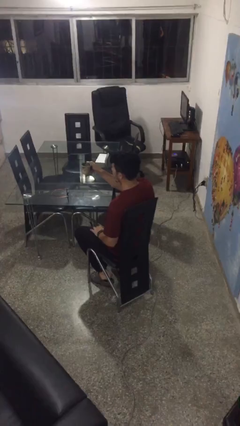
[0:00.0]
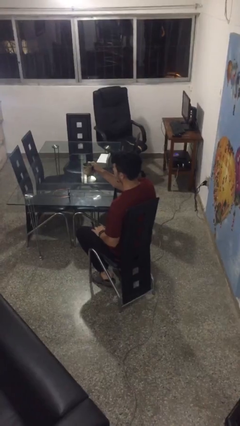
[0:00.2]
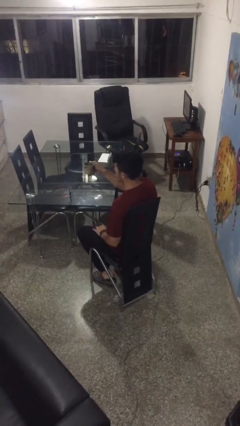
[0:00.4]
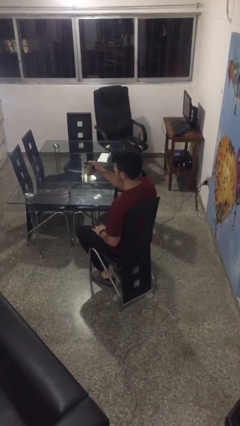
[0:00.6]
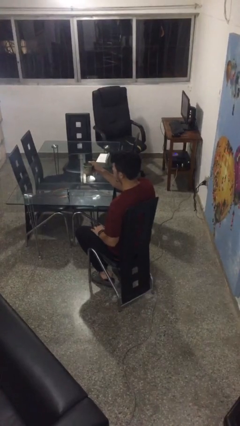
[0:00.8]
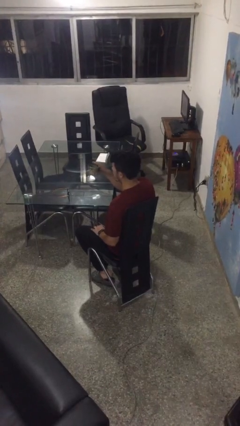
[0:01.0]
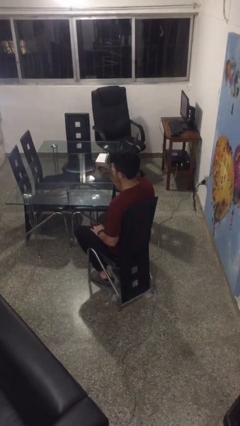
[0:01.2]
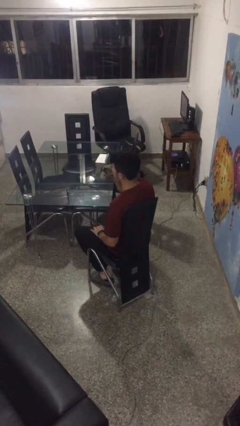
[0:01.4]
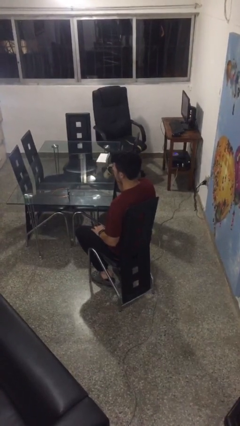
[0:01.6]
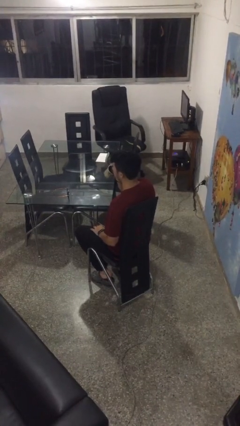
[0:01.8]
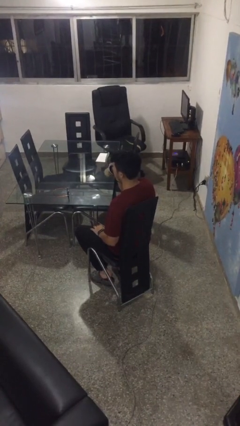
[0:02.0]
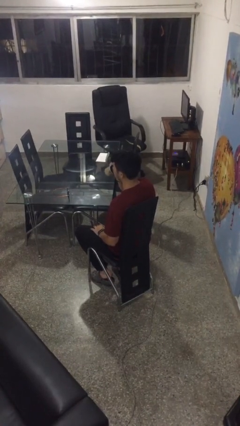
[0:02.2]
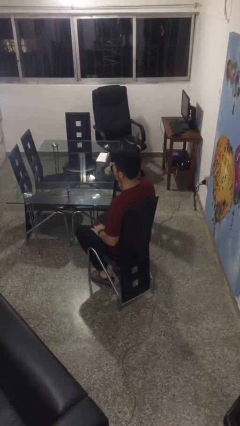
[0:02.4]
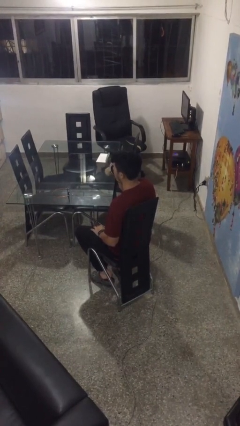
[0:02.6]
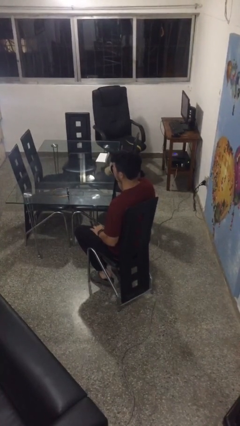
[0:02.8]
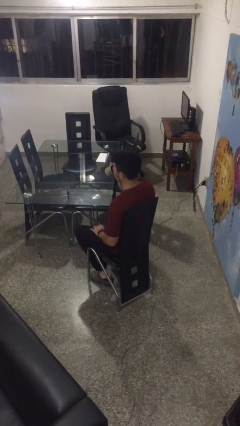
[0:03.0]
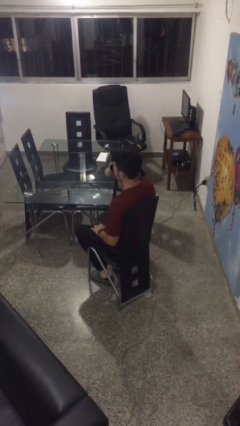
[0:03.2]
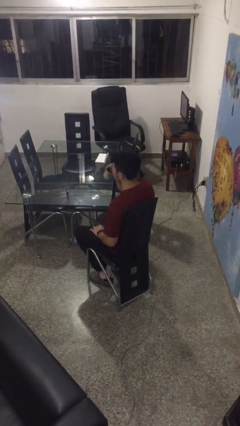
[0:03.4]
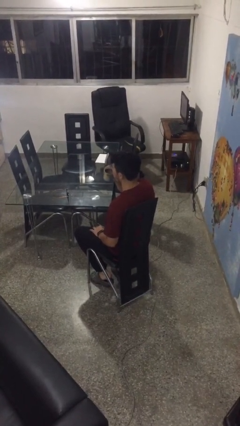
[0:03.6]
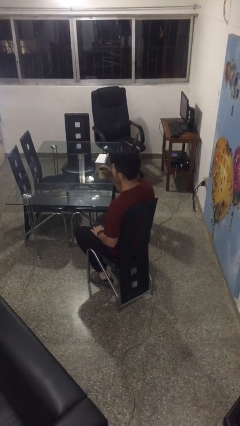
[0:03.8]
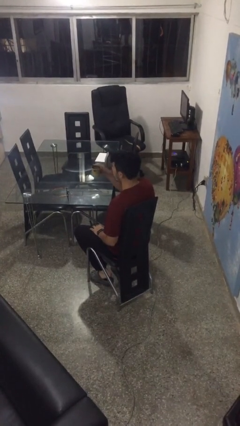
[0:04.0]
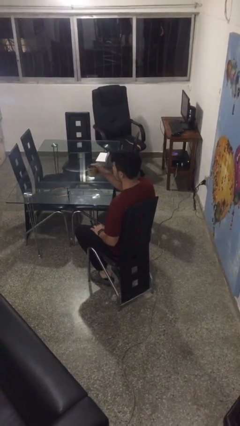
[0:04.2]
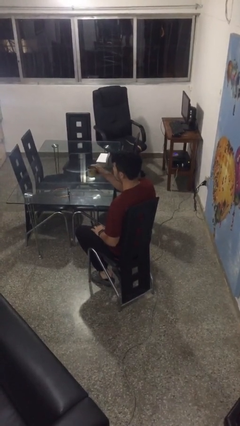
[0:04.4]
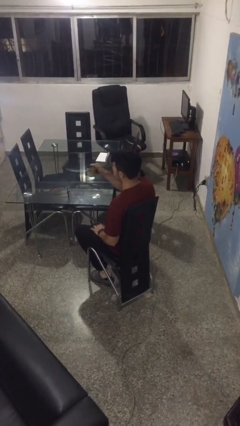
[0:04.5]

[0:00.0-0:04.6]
person drinks from mug

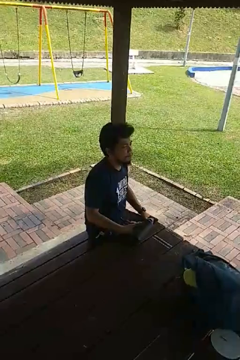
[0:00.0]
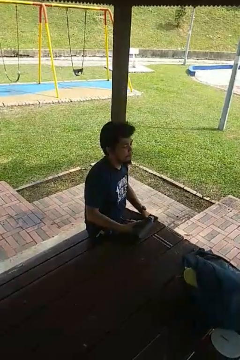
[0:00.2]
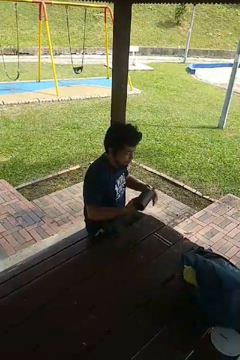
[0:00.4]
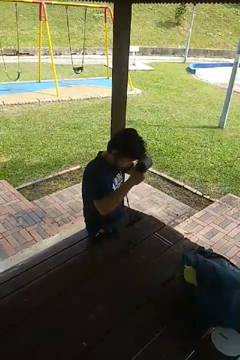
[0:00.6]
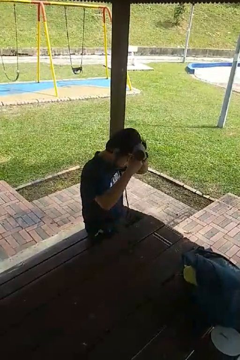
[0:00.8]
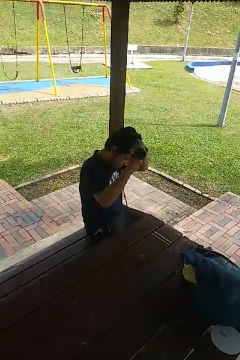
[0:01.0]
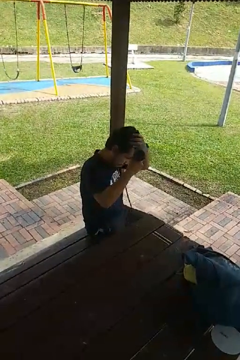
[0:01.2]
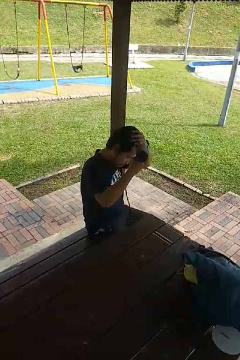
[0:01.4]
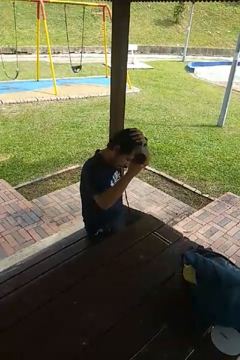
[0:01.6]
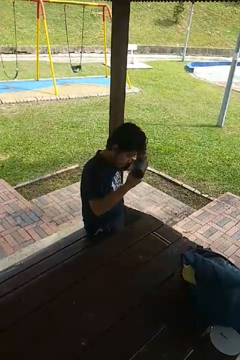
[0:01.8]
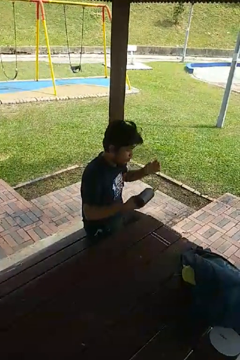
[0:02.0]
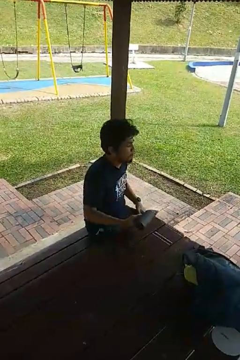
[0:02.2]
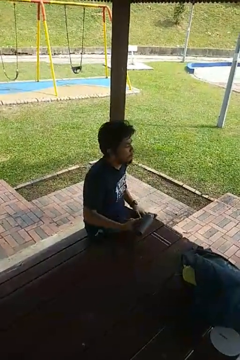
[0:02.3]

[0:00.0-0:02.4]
person dries hair with hairdryer

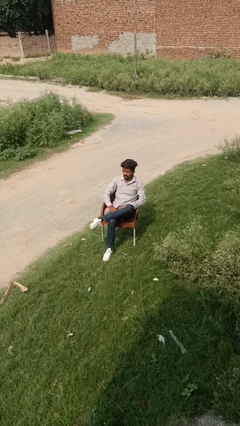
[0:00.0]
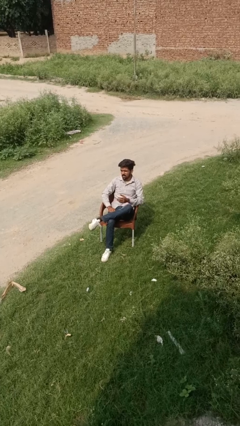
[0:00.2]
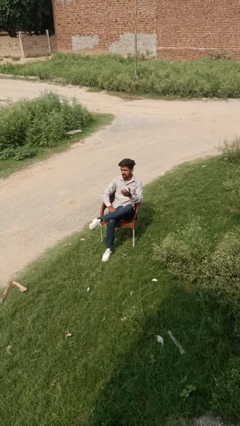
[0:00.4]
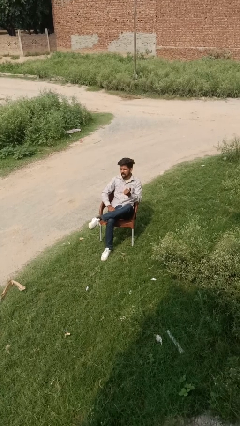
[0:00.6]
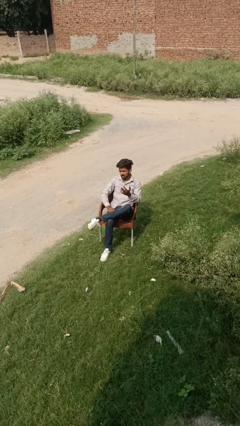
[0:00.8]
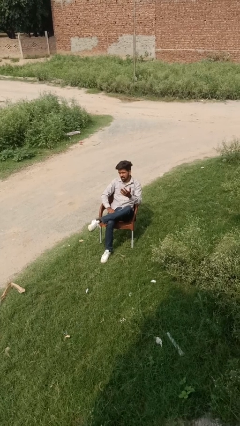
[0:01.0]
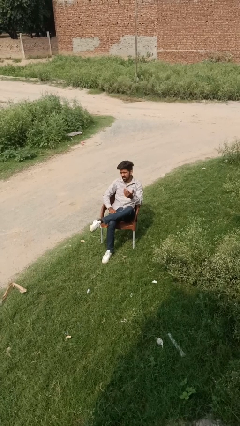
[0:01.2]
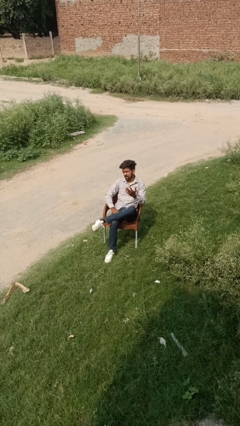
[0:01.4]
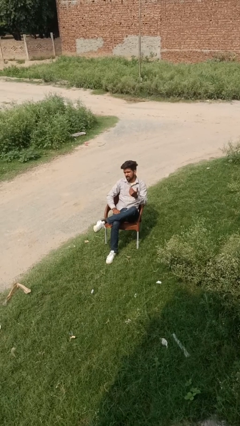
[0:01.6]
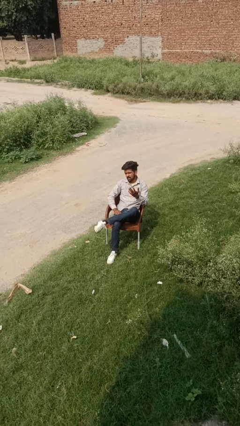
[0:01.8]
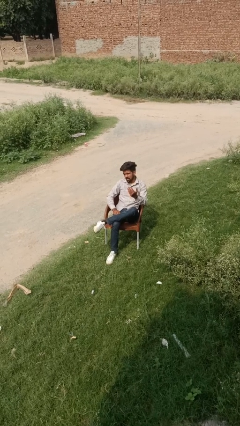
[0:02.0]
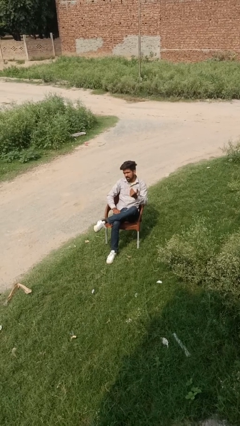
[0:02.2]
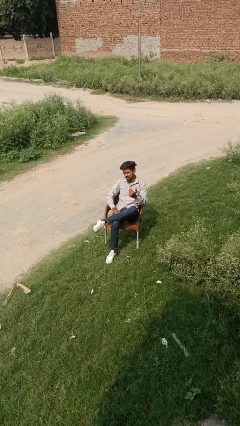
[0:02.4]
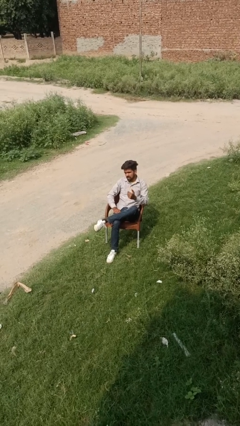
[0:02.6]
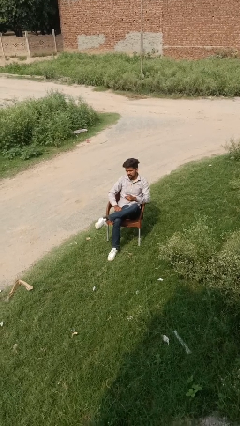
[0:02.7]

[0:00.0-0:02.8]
person gestures come here

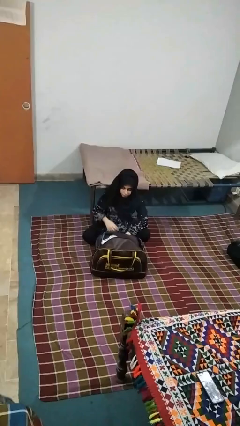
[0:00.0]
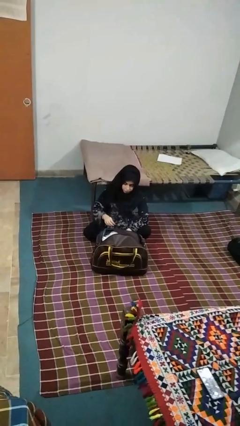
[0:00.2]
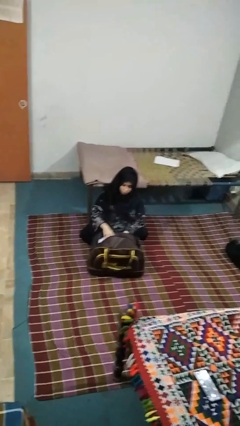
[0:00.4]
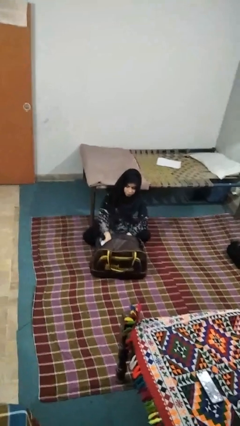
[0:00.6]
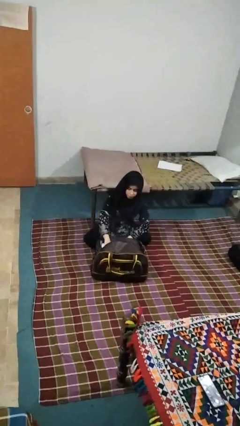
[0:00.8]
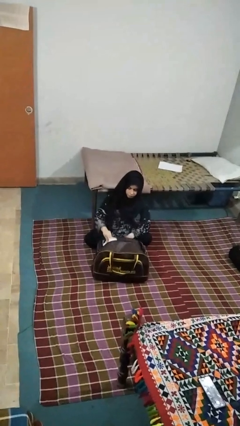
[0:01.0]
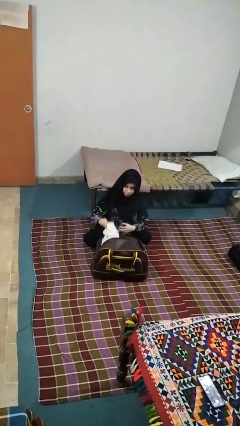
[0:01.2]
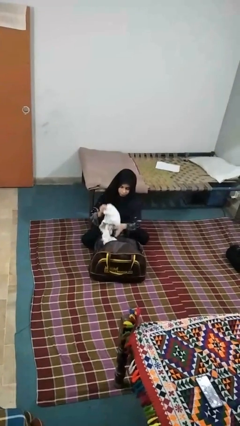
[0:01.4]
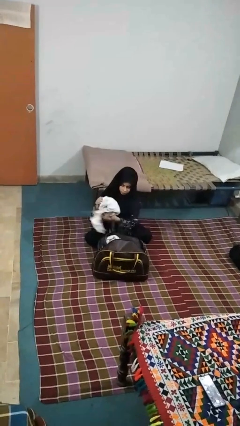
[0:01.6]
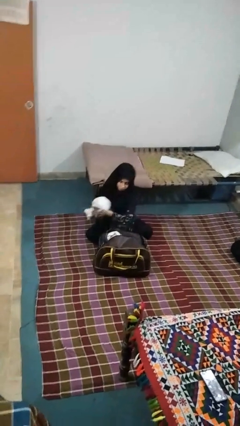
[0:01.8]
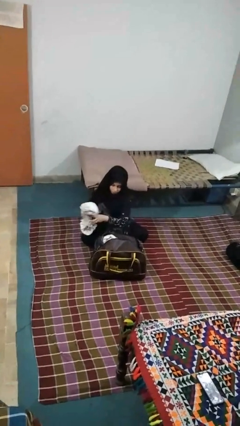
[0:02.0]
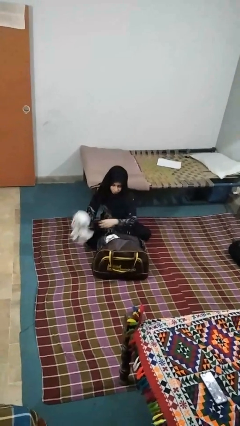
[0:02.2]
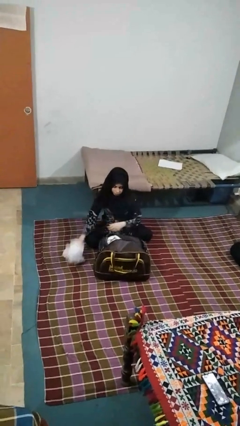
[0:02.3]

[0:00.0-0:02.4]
person unloads clothes from suitcase

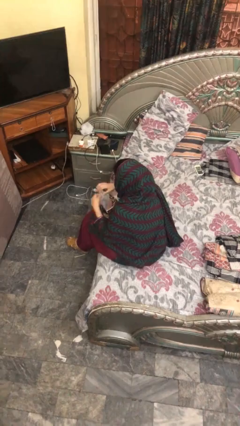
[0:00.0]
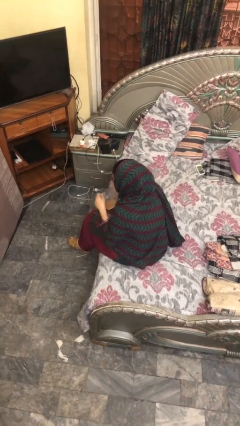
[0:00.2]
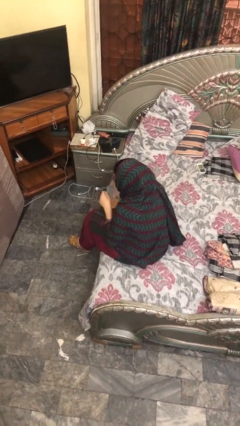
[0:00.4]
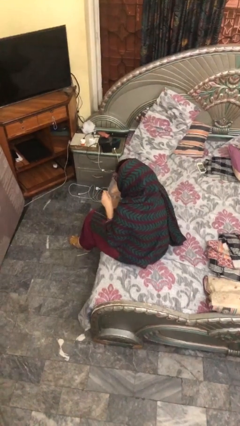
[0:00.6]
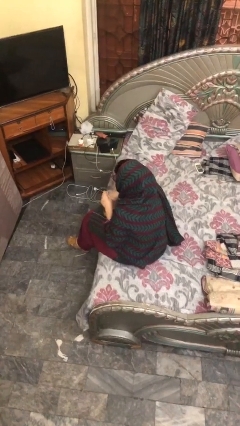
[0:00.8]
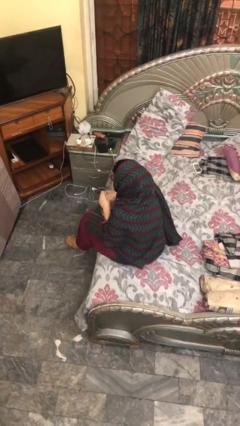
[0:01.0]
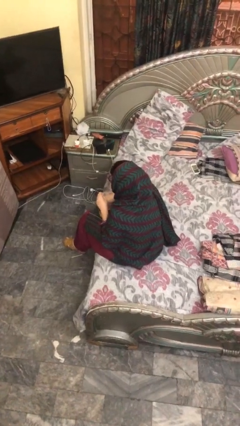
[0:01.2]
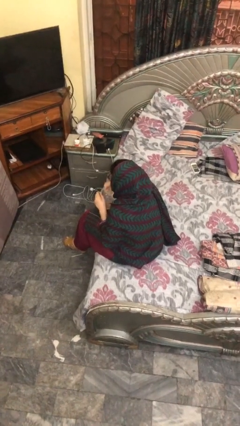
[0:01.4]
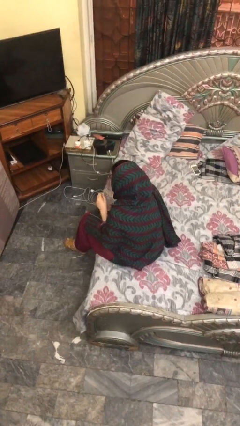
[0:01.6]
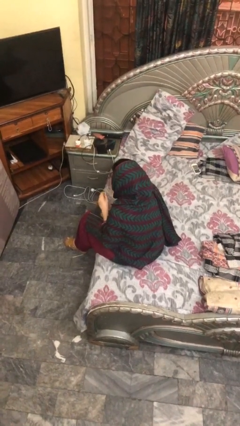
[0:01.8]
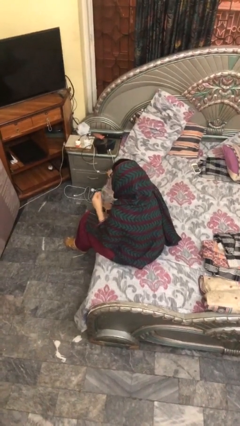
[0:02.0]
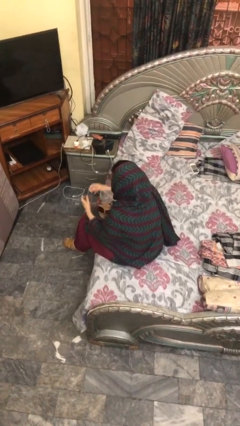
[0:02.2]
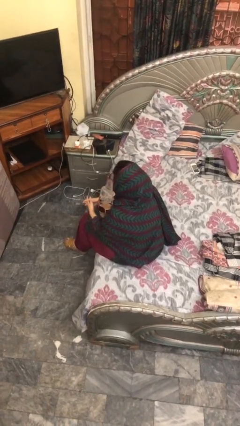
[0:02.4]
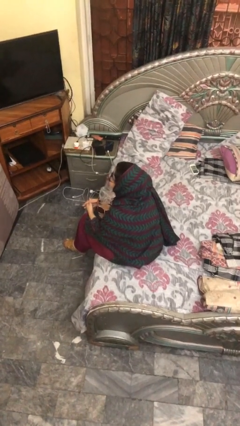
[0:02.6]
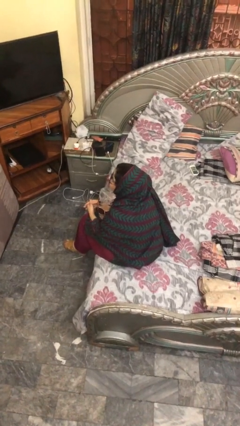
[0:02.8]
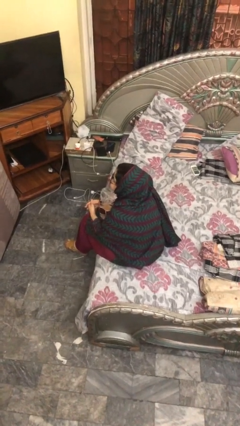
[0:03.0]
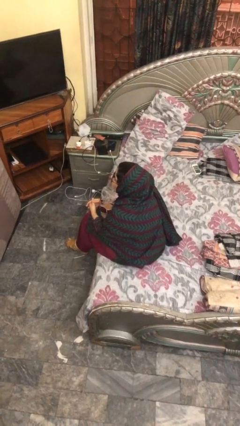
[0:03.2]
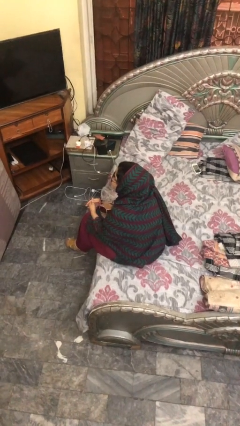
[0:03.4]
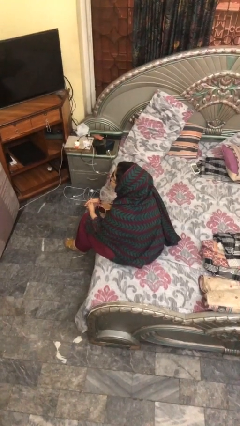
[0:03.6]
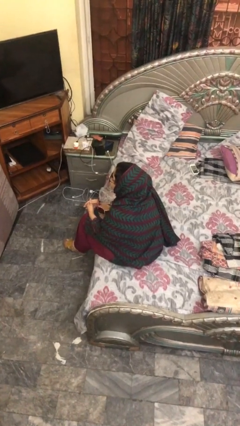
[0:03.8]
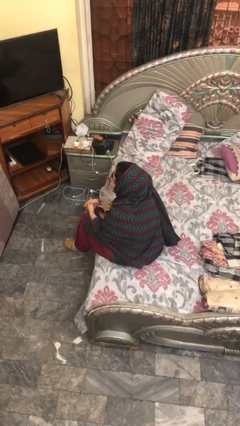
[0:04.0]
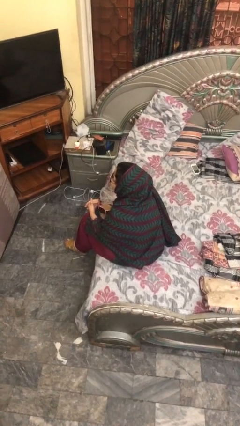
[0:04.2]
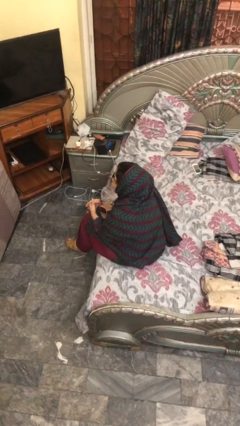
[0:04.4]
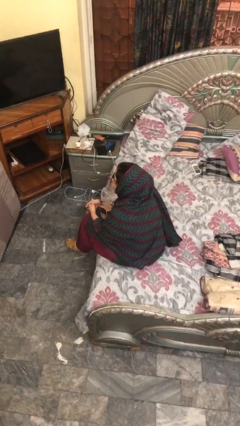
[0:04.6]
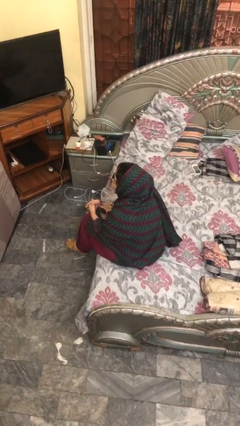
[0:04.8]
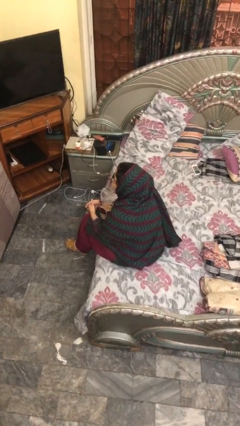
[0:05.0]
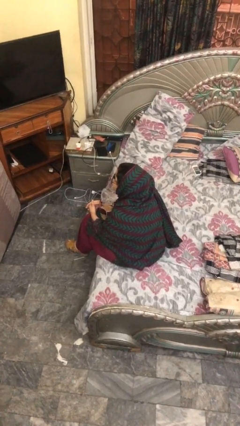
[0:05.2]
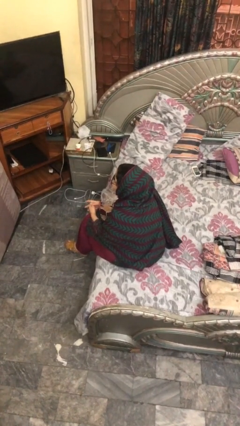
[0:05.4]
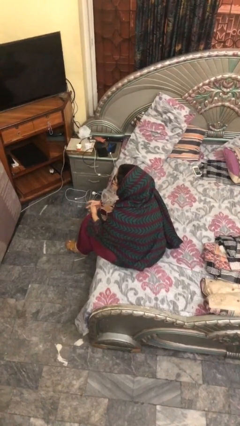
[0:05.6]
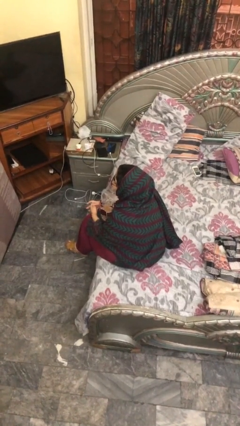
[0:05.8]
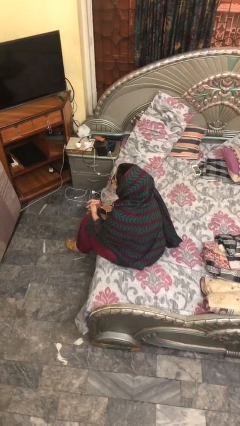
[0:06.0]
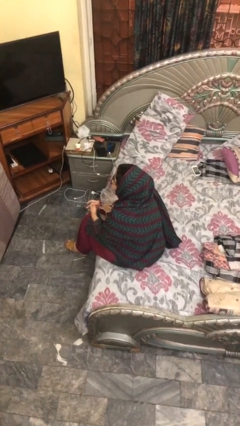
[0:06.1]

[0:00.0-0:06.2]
person eats snack from bag
